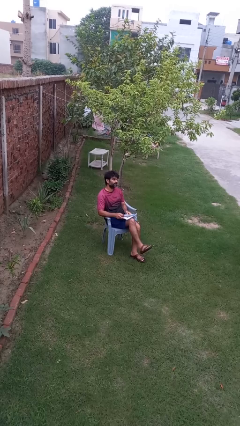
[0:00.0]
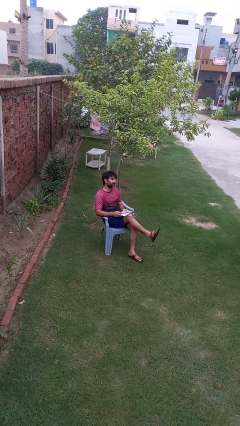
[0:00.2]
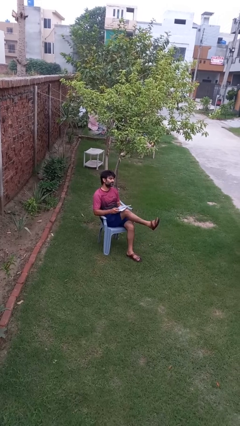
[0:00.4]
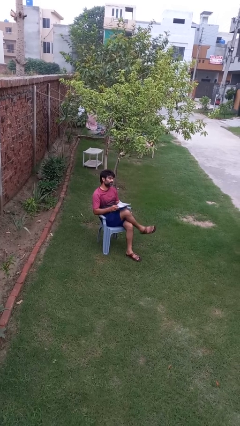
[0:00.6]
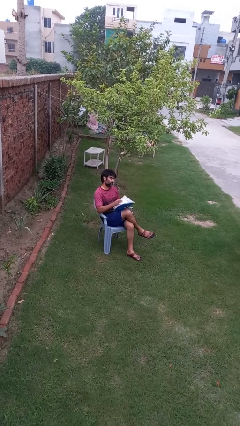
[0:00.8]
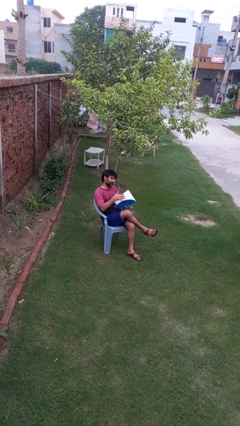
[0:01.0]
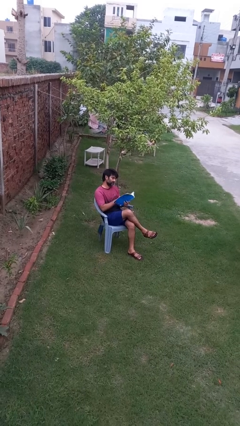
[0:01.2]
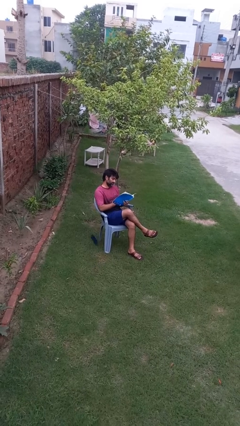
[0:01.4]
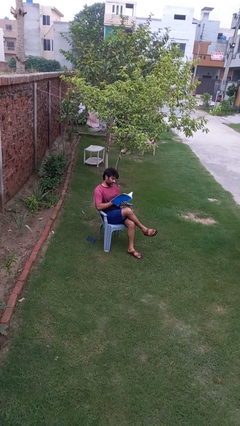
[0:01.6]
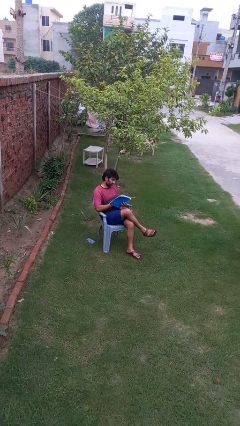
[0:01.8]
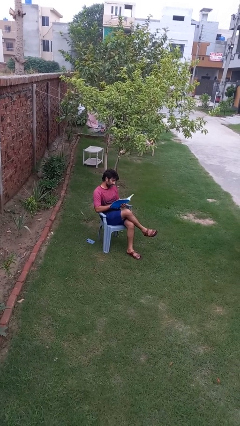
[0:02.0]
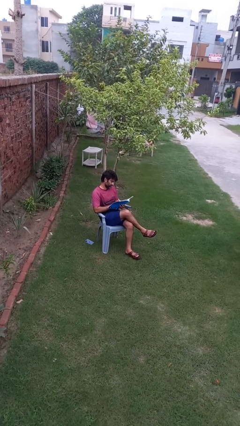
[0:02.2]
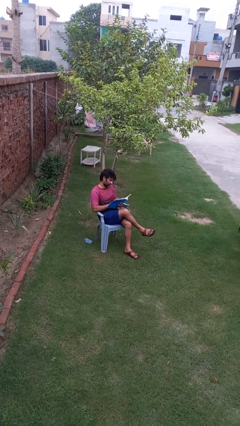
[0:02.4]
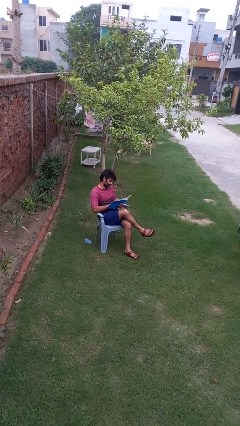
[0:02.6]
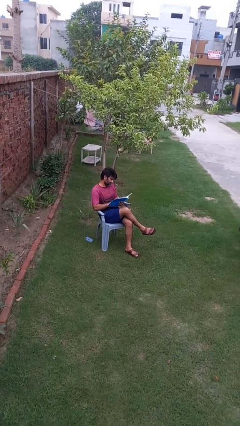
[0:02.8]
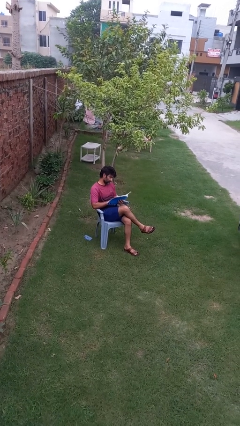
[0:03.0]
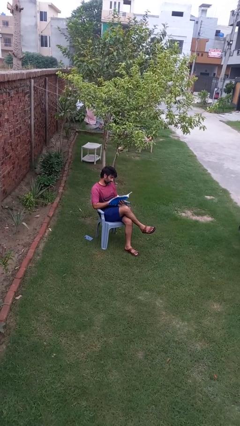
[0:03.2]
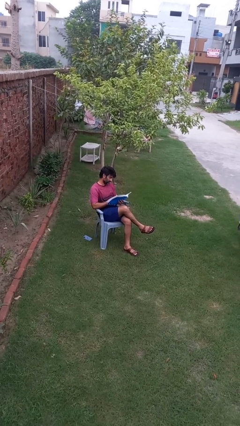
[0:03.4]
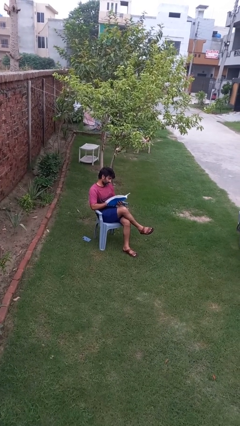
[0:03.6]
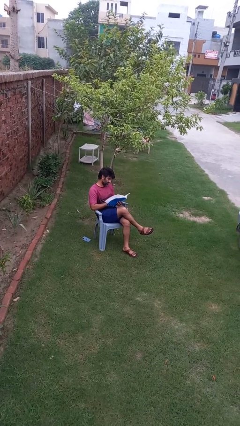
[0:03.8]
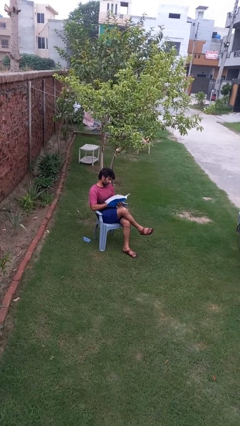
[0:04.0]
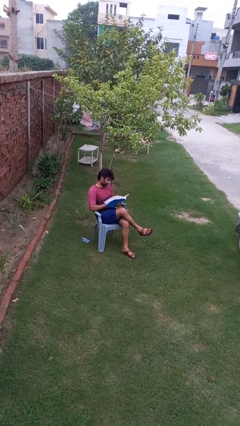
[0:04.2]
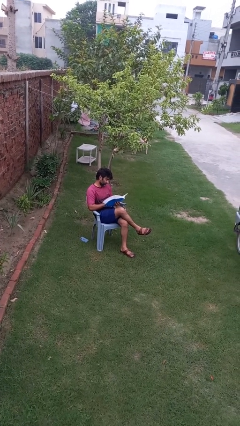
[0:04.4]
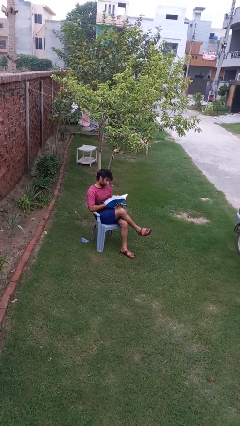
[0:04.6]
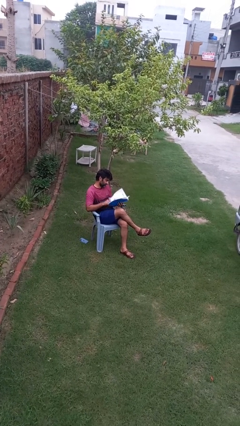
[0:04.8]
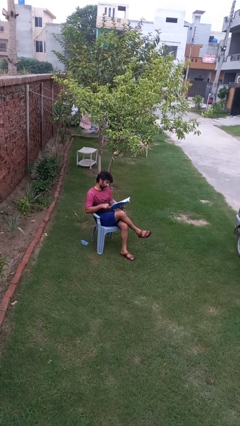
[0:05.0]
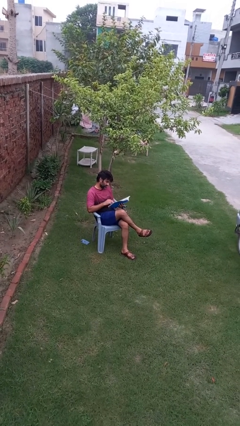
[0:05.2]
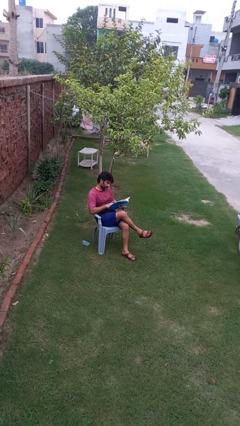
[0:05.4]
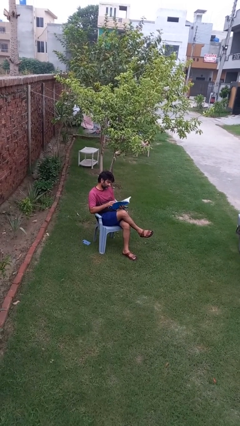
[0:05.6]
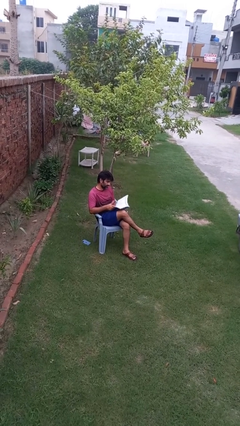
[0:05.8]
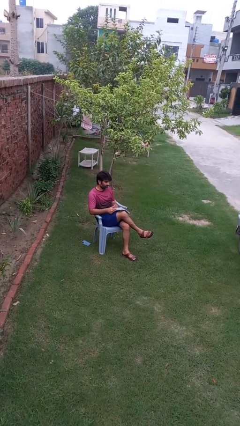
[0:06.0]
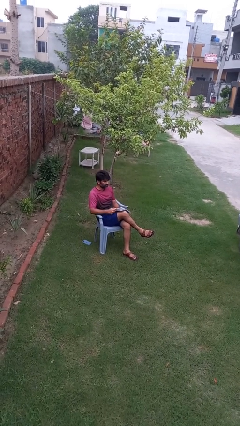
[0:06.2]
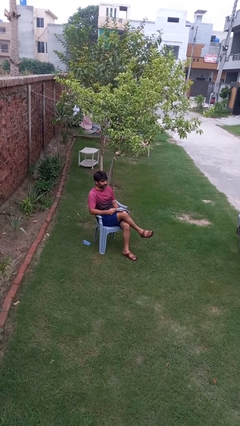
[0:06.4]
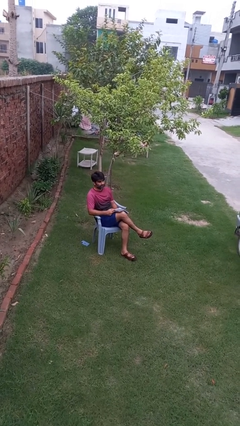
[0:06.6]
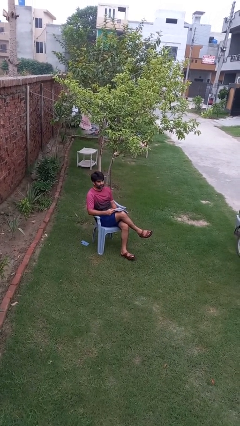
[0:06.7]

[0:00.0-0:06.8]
person reads book

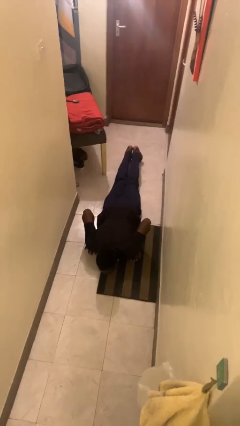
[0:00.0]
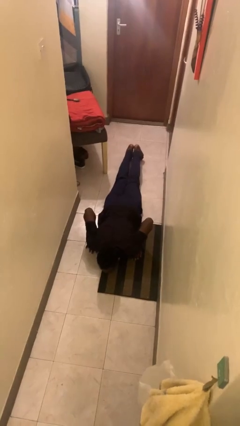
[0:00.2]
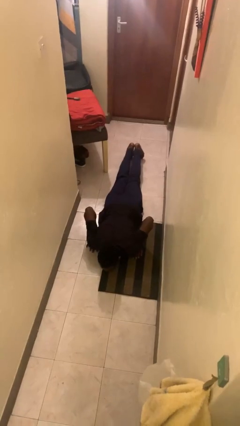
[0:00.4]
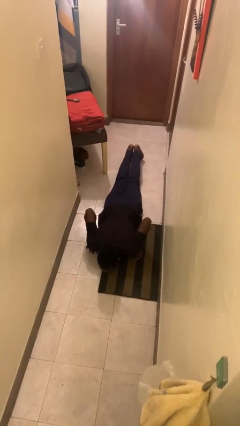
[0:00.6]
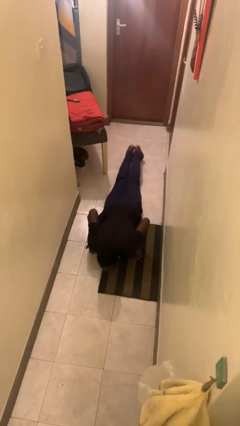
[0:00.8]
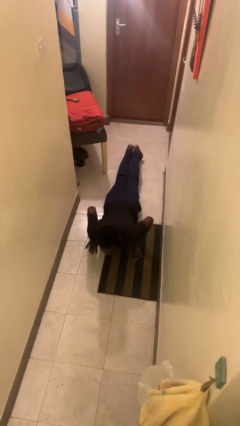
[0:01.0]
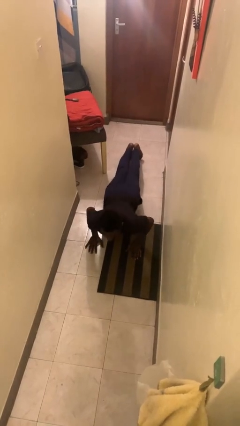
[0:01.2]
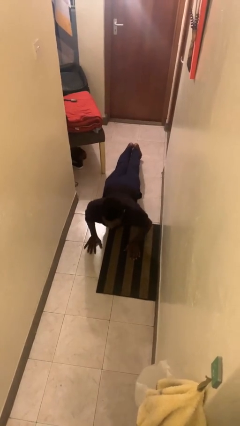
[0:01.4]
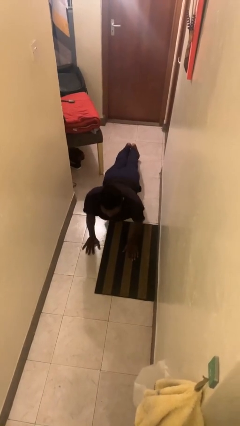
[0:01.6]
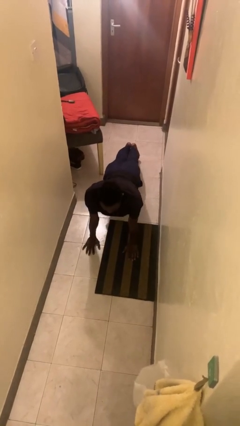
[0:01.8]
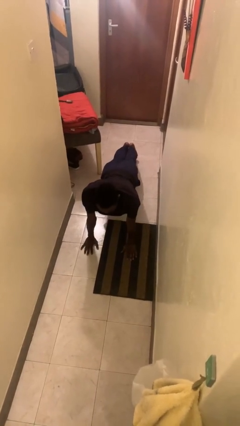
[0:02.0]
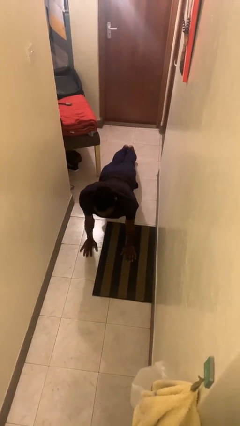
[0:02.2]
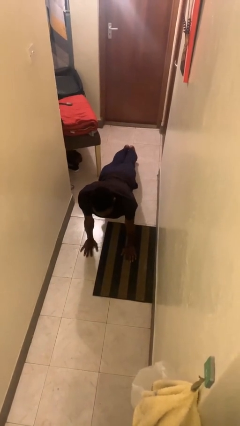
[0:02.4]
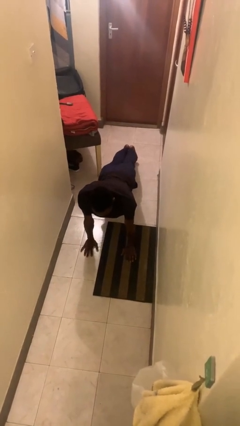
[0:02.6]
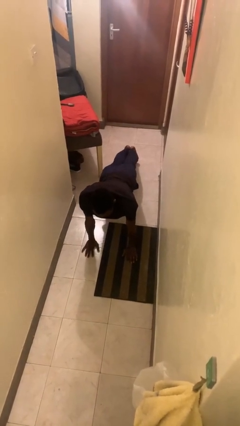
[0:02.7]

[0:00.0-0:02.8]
person exercises with pushup

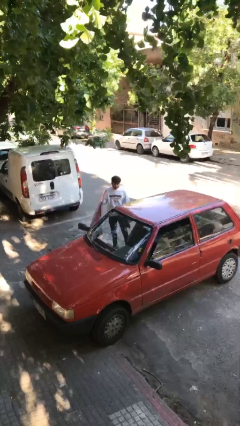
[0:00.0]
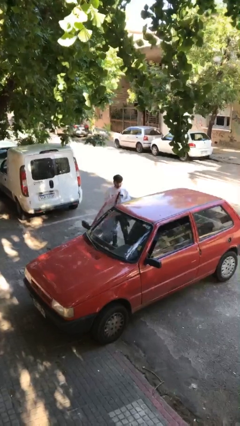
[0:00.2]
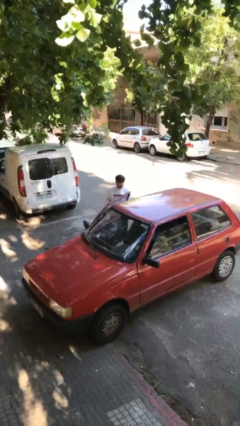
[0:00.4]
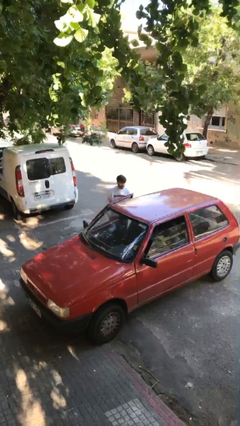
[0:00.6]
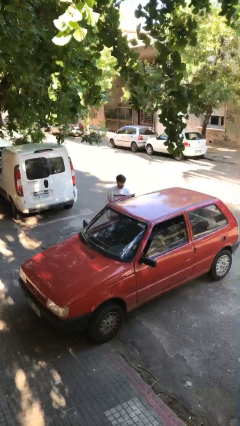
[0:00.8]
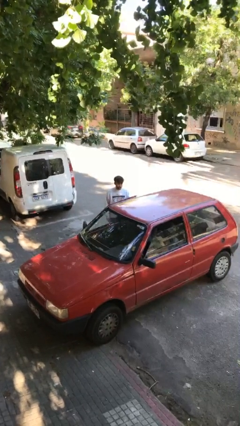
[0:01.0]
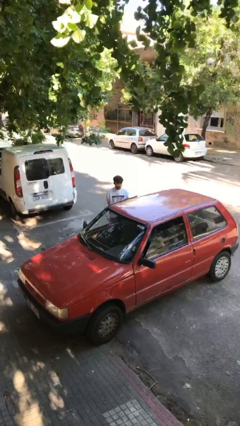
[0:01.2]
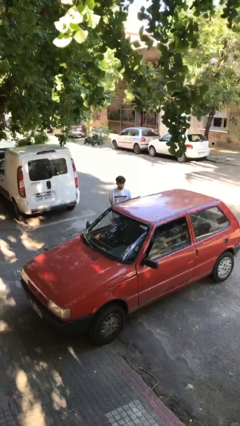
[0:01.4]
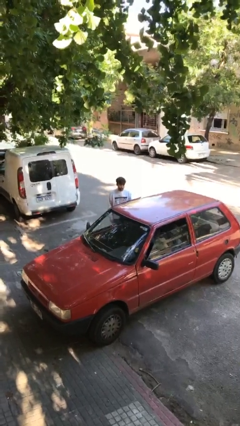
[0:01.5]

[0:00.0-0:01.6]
person closes car door

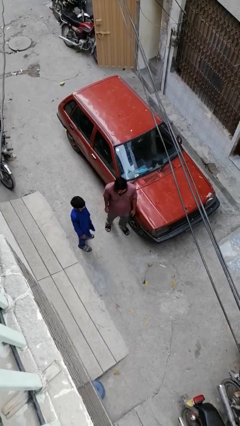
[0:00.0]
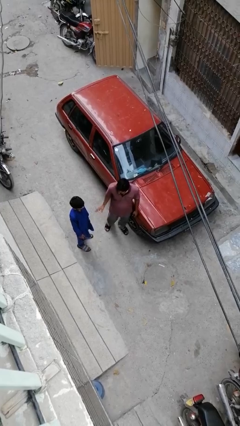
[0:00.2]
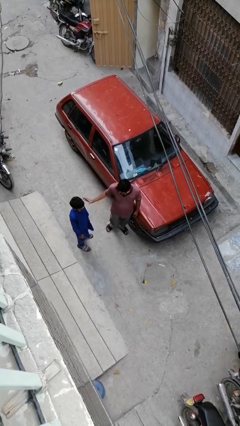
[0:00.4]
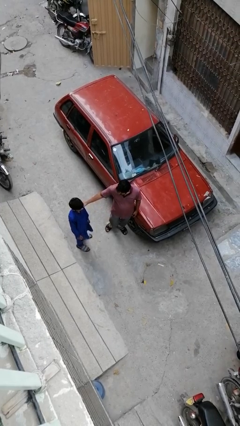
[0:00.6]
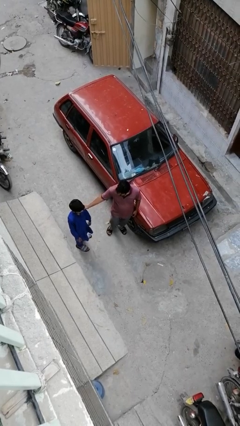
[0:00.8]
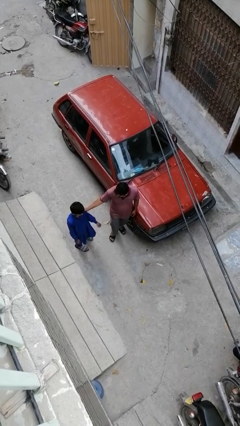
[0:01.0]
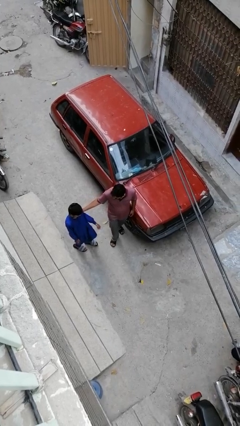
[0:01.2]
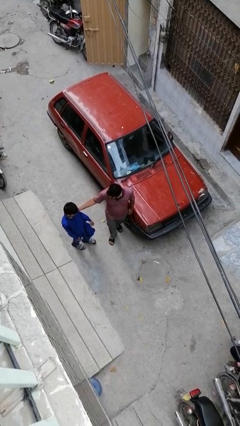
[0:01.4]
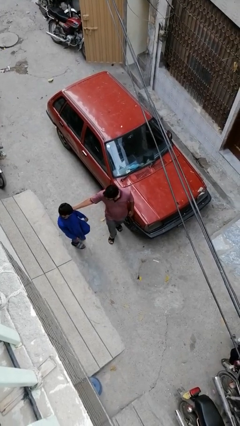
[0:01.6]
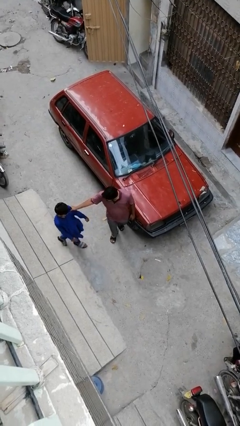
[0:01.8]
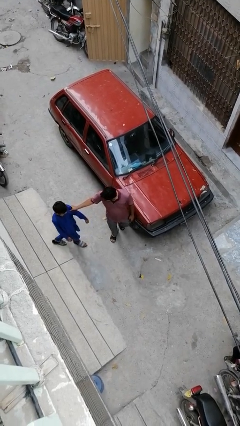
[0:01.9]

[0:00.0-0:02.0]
person grabs person by bicep

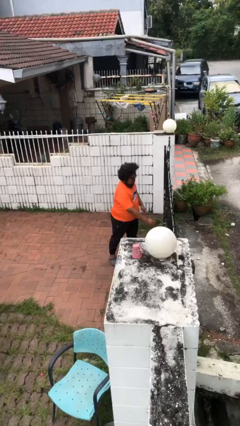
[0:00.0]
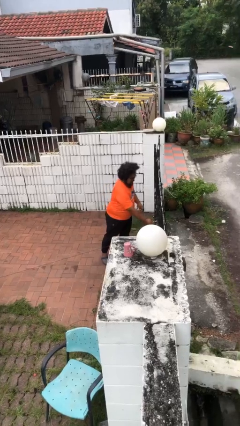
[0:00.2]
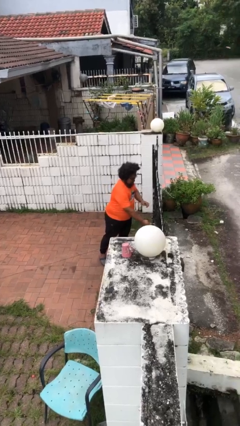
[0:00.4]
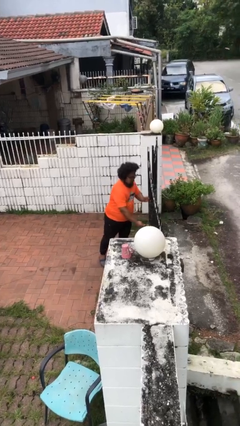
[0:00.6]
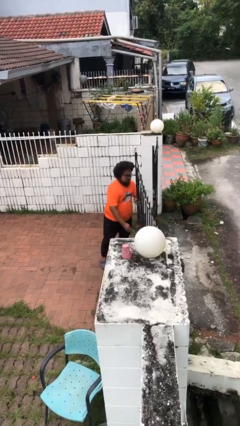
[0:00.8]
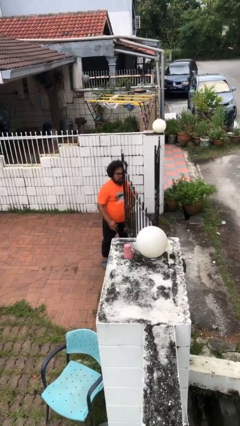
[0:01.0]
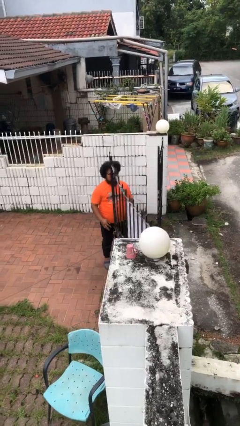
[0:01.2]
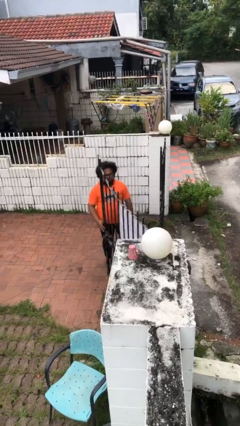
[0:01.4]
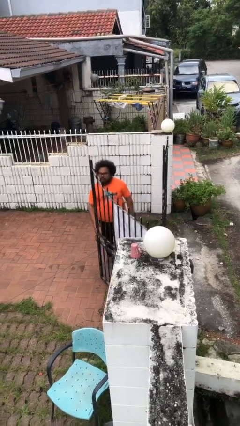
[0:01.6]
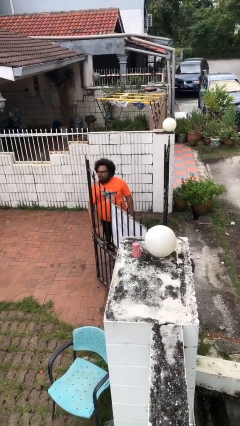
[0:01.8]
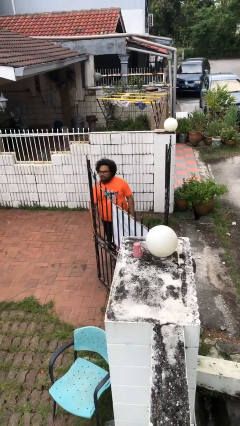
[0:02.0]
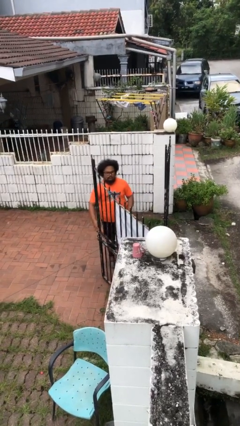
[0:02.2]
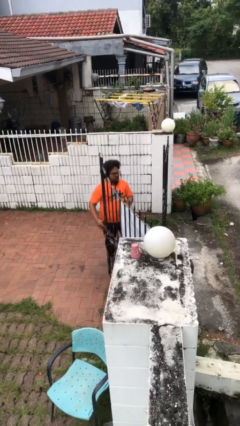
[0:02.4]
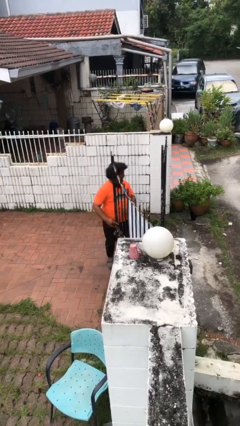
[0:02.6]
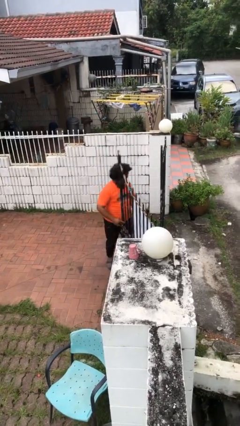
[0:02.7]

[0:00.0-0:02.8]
person opens facility door

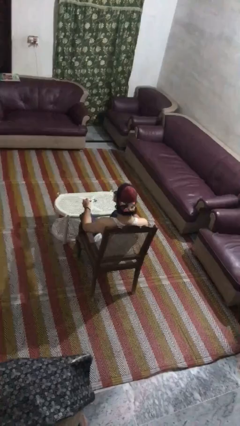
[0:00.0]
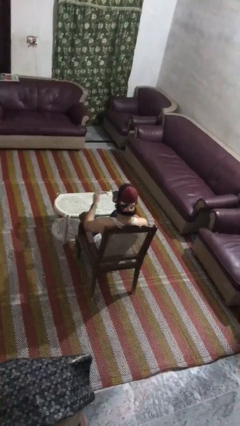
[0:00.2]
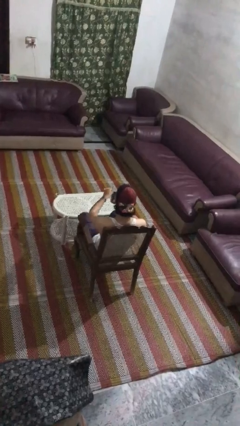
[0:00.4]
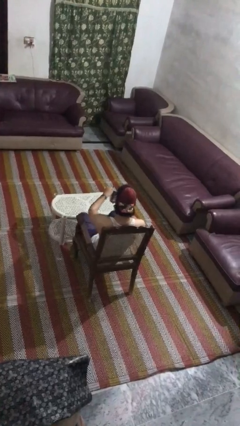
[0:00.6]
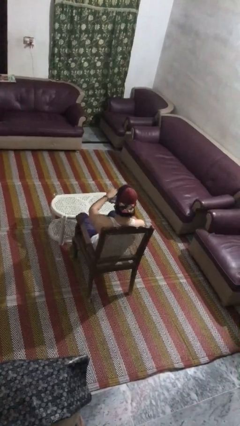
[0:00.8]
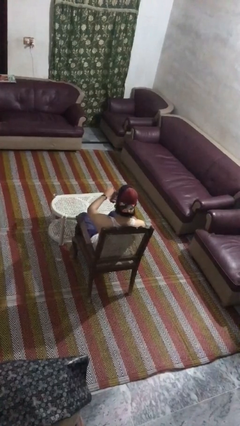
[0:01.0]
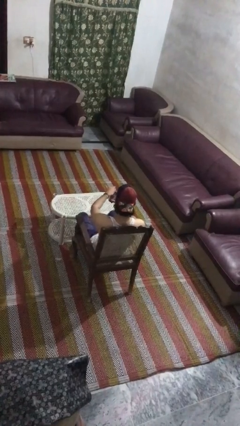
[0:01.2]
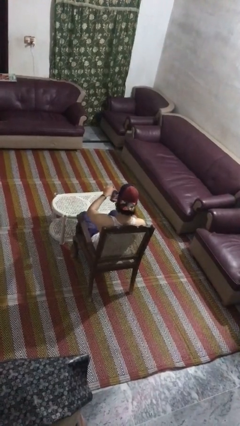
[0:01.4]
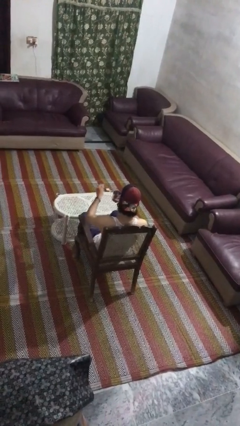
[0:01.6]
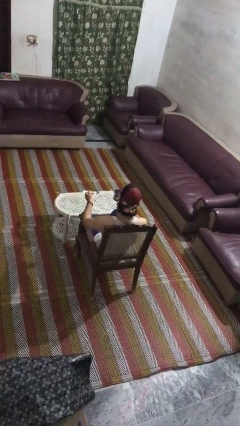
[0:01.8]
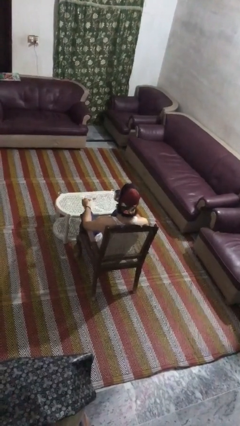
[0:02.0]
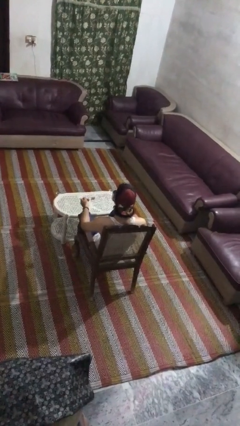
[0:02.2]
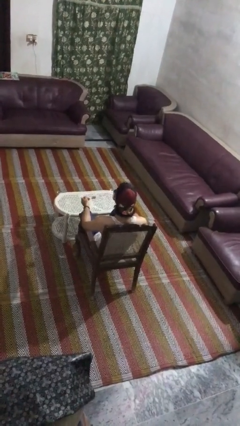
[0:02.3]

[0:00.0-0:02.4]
person stirs mug
